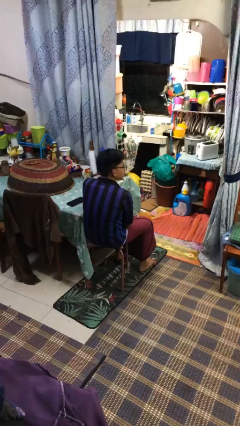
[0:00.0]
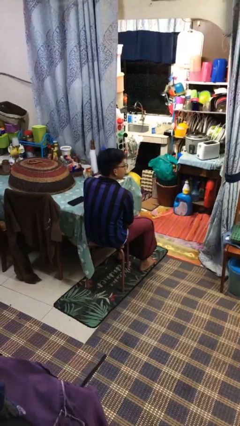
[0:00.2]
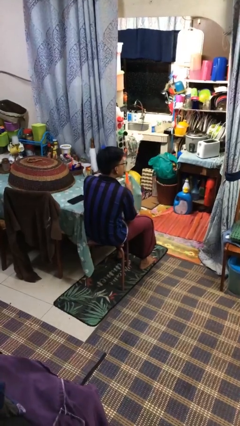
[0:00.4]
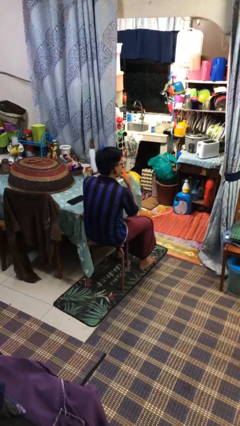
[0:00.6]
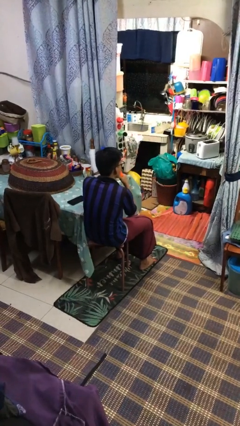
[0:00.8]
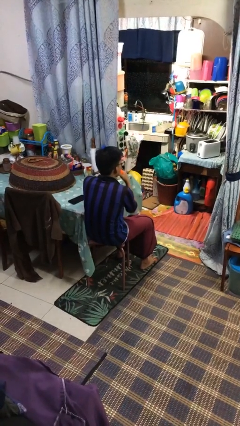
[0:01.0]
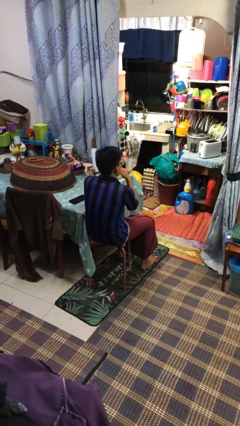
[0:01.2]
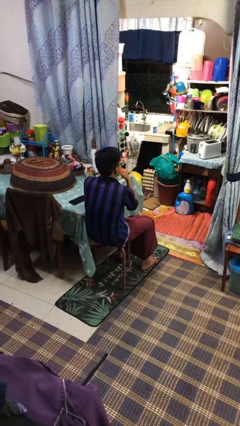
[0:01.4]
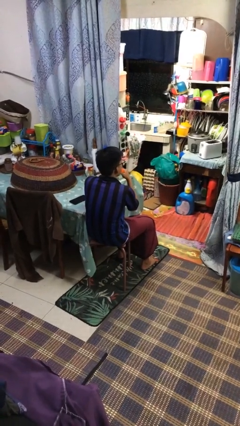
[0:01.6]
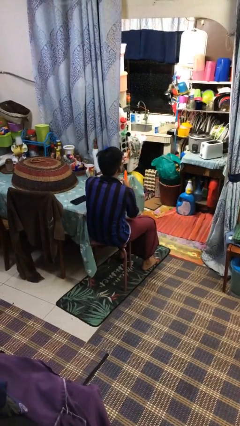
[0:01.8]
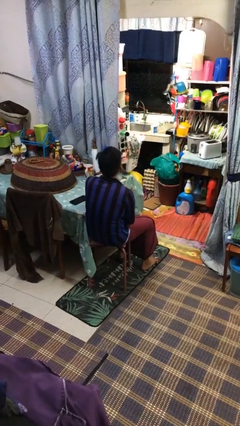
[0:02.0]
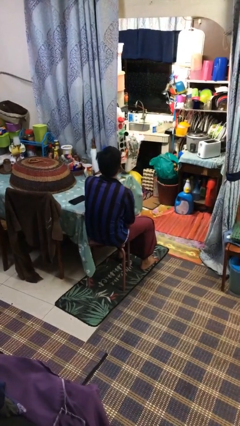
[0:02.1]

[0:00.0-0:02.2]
person vapes

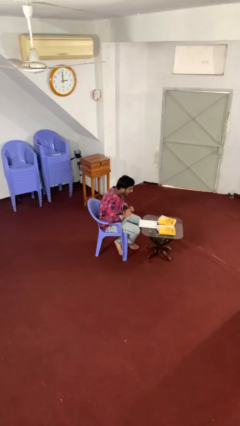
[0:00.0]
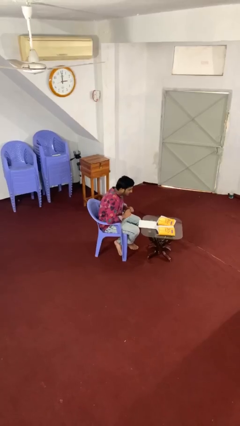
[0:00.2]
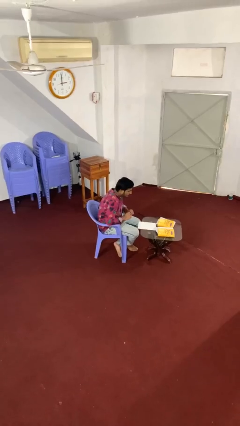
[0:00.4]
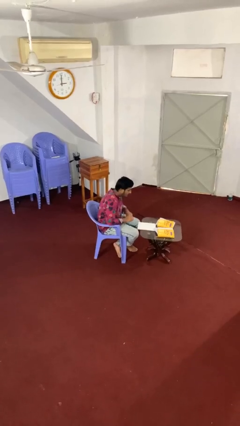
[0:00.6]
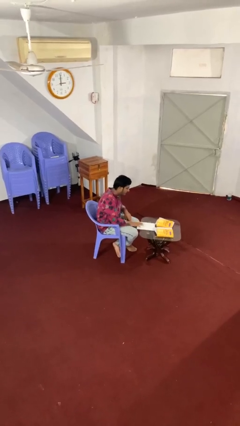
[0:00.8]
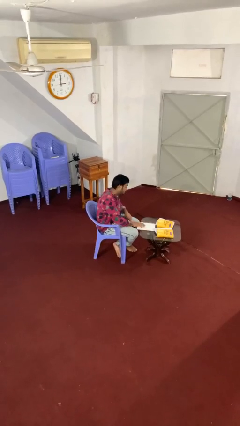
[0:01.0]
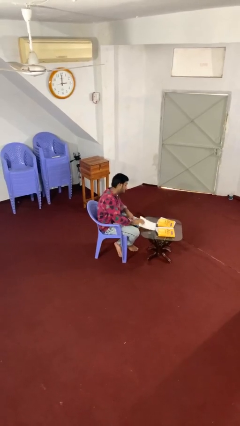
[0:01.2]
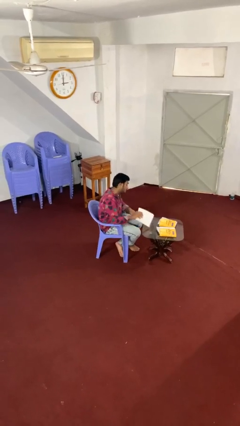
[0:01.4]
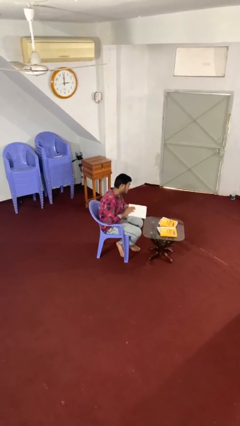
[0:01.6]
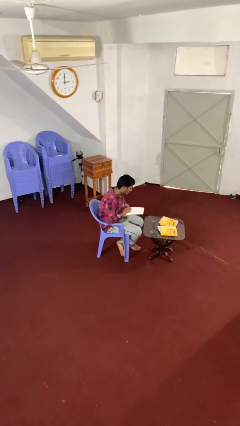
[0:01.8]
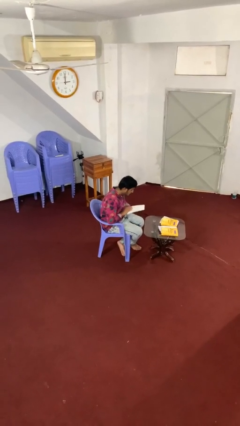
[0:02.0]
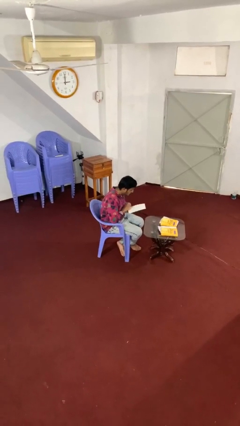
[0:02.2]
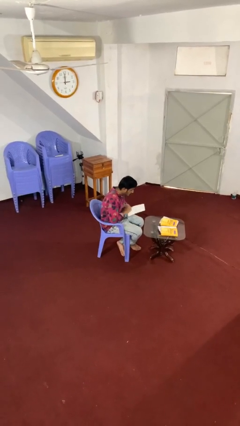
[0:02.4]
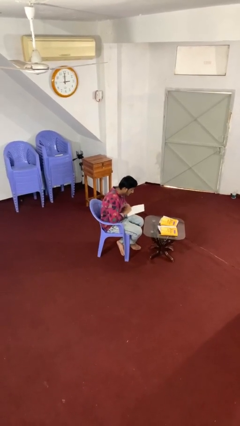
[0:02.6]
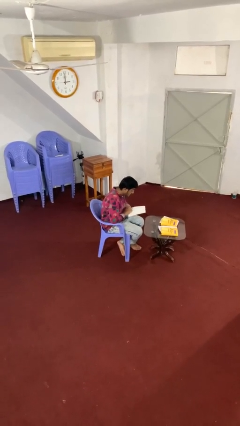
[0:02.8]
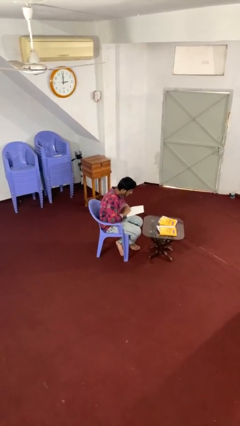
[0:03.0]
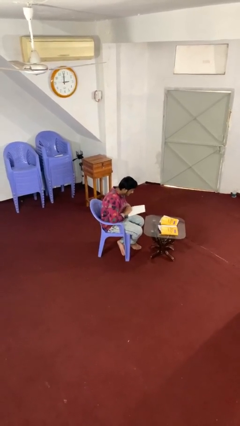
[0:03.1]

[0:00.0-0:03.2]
person picks up object from table

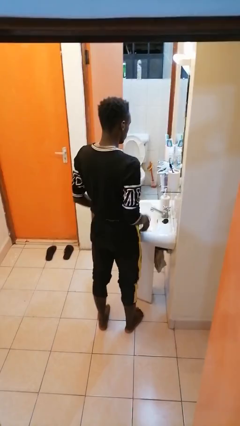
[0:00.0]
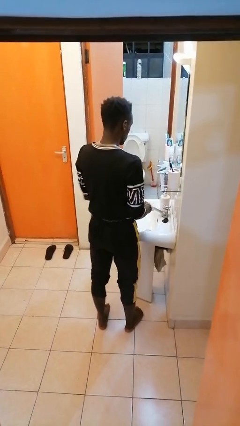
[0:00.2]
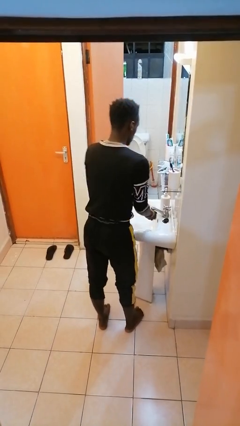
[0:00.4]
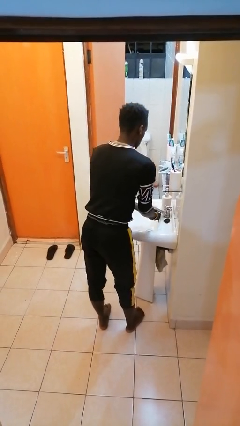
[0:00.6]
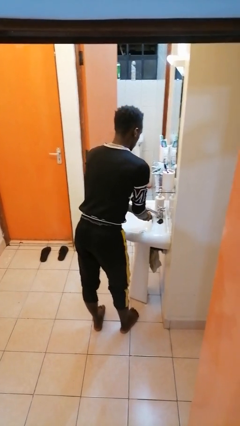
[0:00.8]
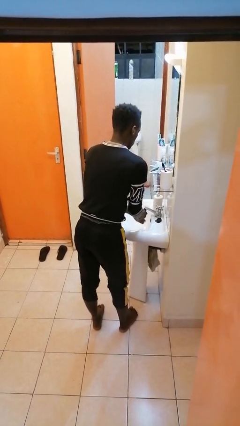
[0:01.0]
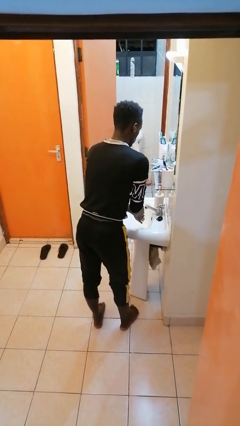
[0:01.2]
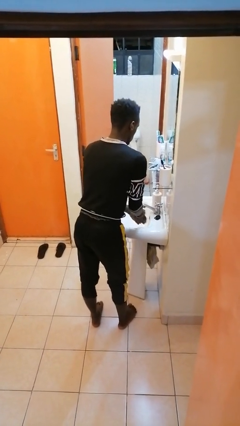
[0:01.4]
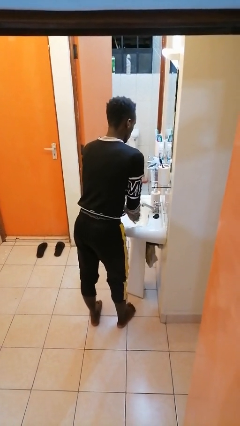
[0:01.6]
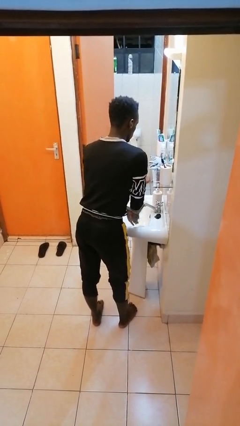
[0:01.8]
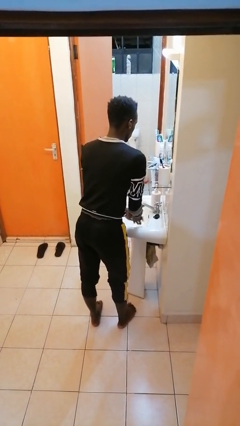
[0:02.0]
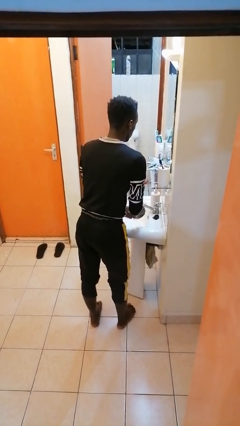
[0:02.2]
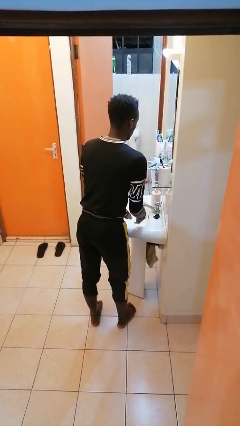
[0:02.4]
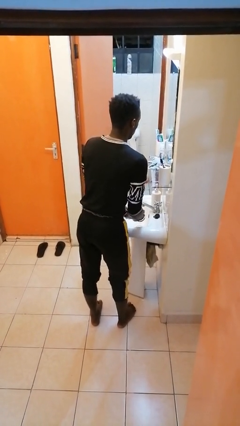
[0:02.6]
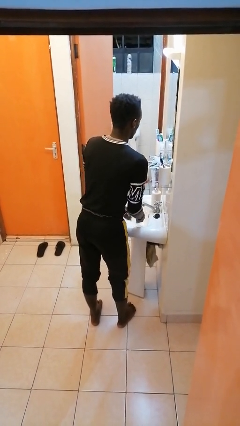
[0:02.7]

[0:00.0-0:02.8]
person washes hands

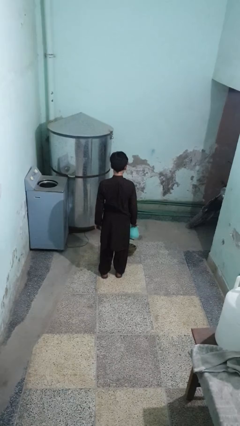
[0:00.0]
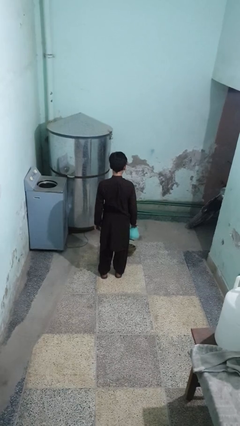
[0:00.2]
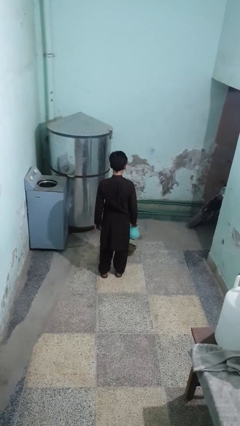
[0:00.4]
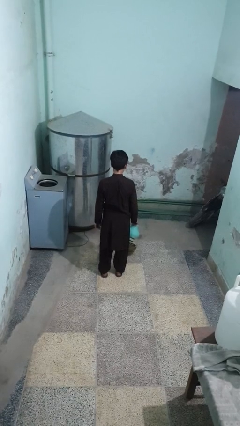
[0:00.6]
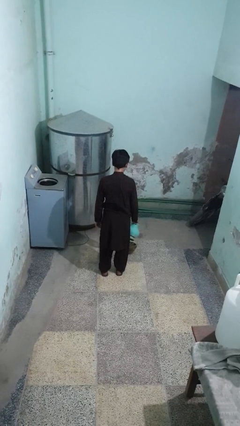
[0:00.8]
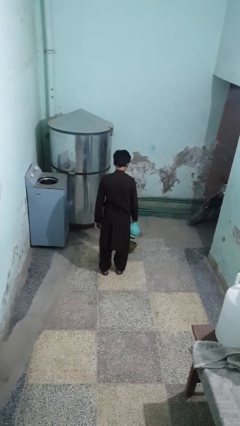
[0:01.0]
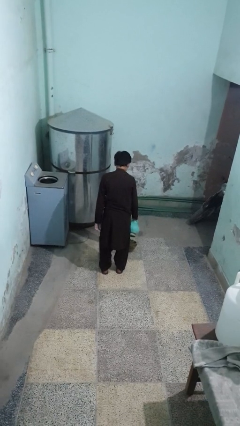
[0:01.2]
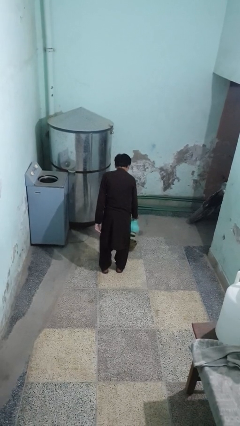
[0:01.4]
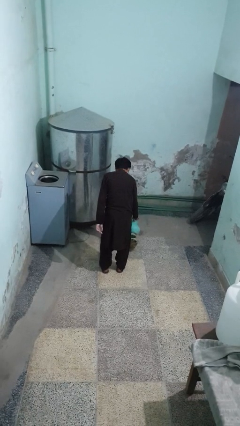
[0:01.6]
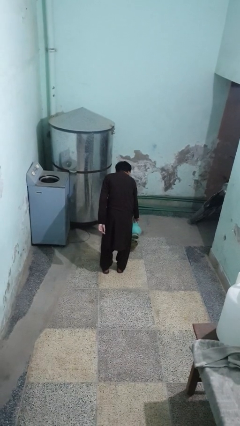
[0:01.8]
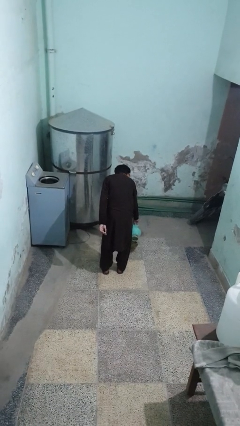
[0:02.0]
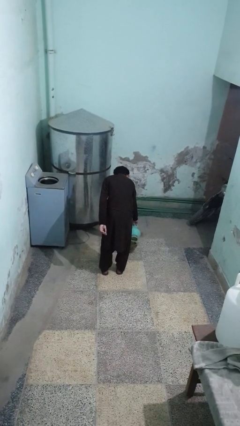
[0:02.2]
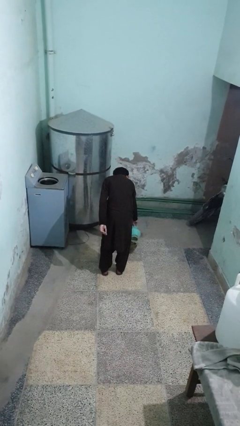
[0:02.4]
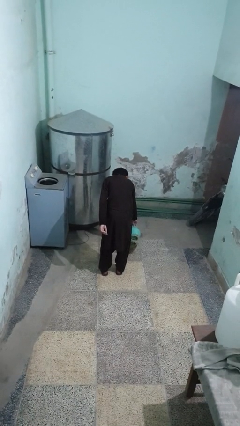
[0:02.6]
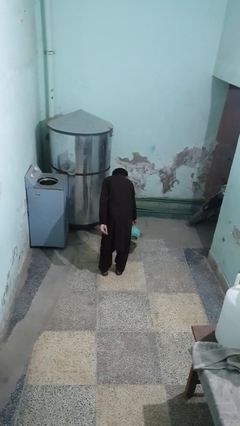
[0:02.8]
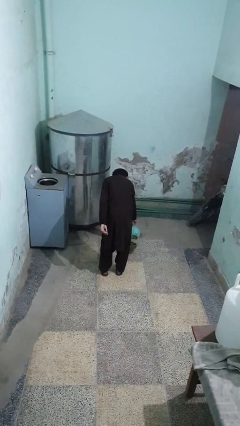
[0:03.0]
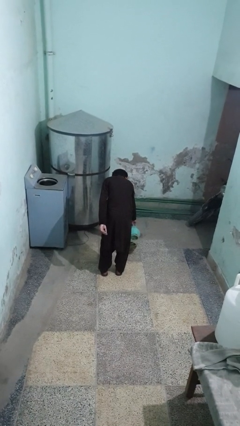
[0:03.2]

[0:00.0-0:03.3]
person waters houseplant

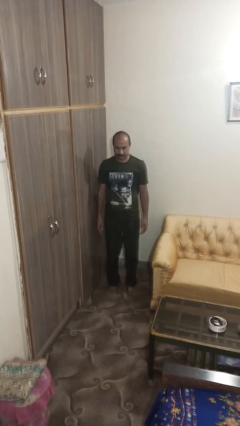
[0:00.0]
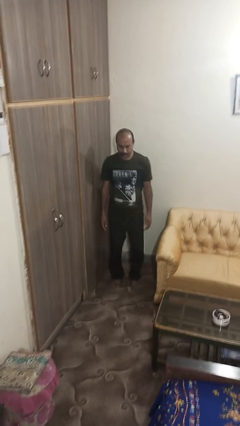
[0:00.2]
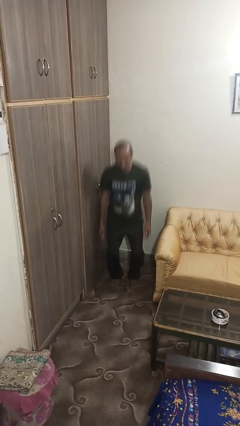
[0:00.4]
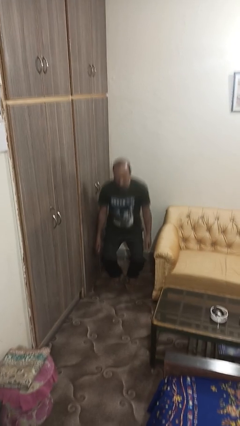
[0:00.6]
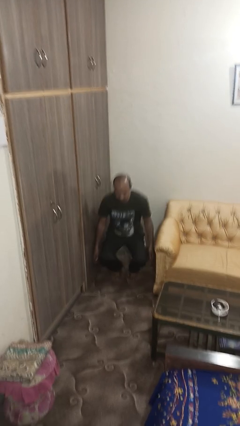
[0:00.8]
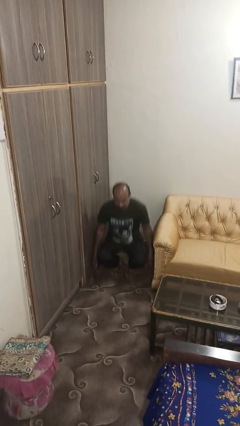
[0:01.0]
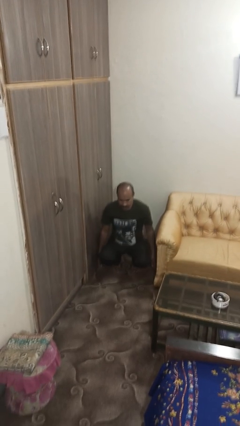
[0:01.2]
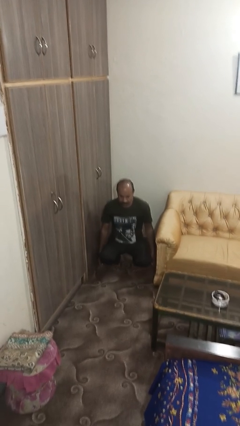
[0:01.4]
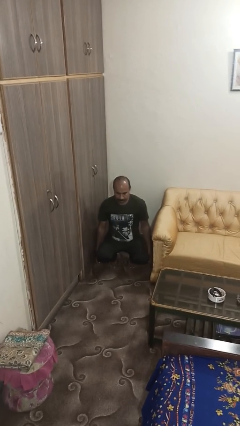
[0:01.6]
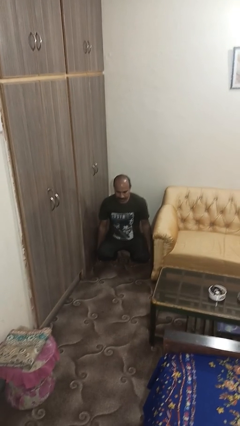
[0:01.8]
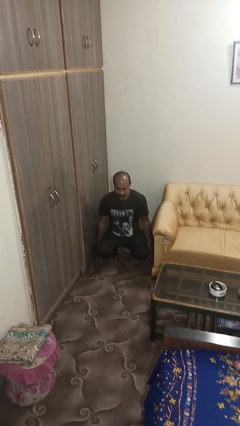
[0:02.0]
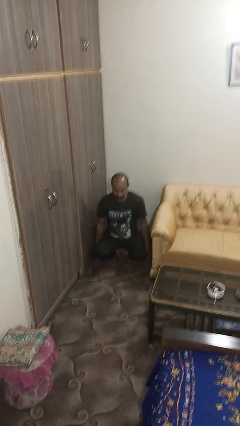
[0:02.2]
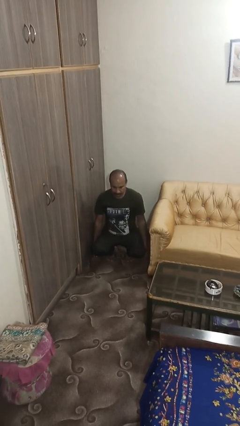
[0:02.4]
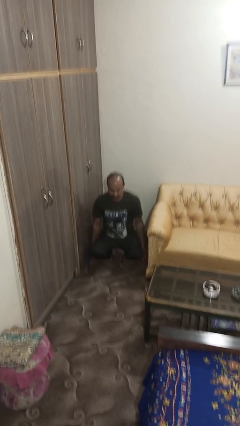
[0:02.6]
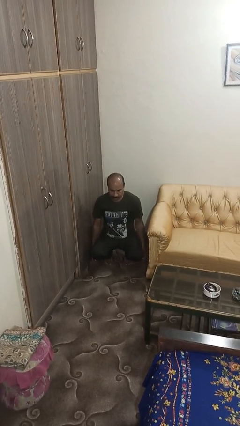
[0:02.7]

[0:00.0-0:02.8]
person squats

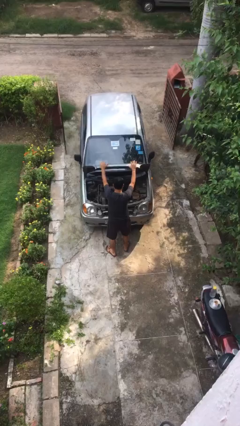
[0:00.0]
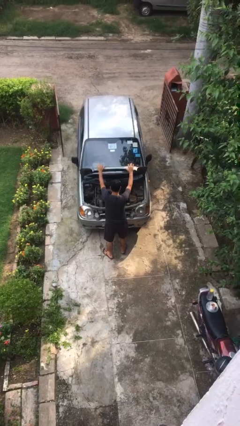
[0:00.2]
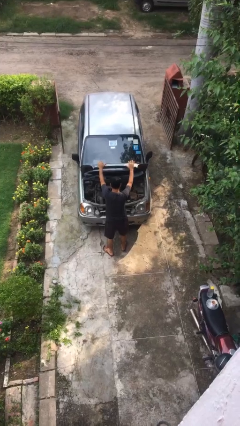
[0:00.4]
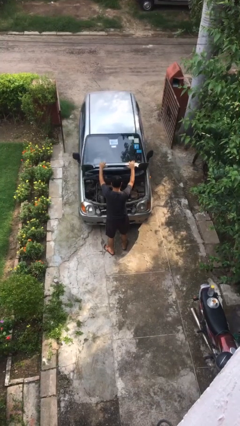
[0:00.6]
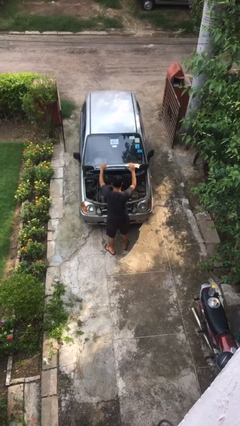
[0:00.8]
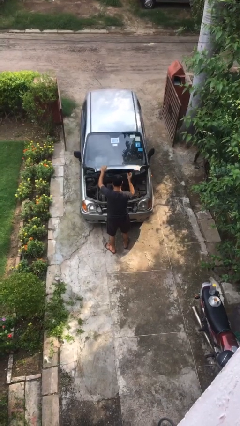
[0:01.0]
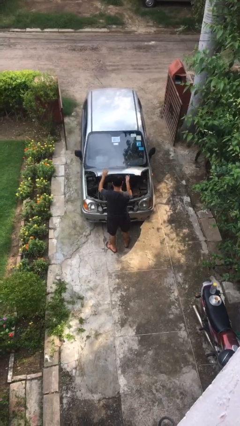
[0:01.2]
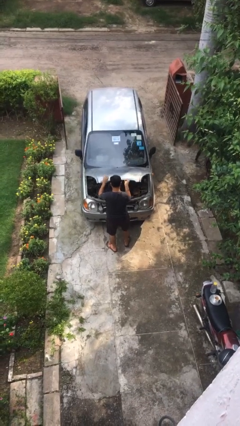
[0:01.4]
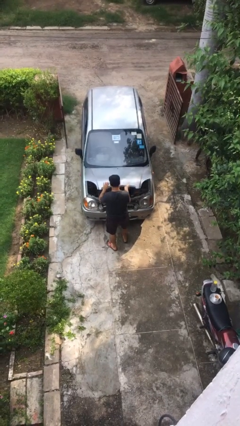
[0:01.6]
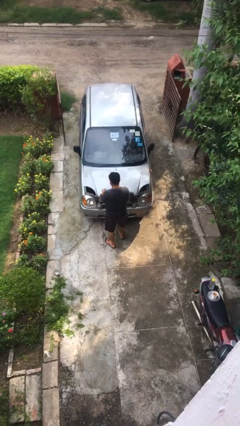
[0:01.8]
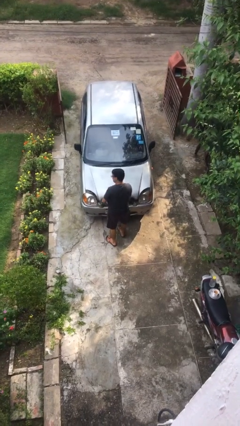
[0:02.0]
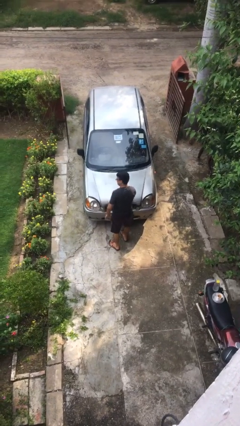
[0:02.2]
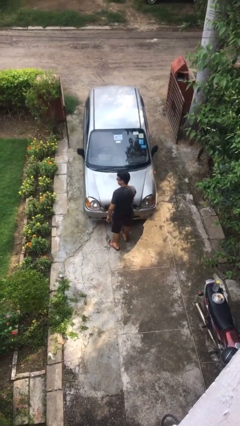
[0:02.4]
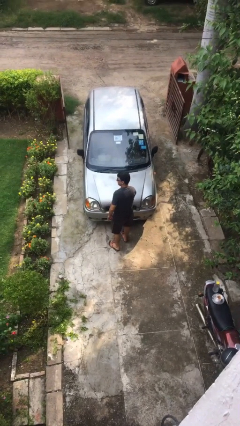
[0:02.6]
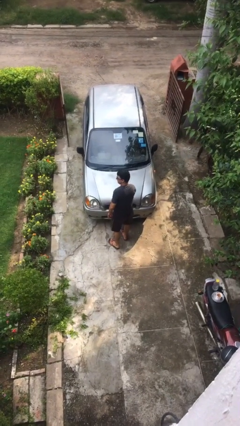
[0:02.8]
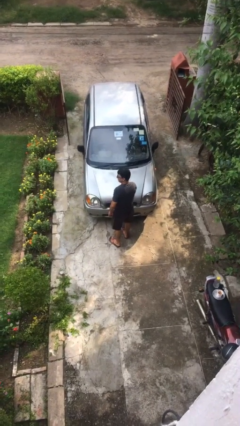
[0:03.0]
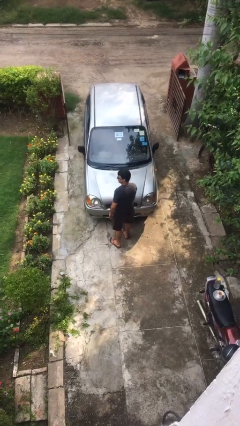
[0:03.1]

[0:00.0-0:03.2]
person closes car hood
